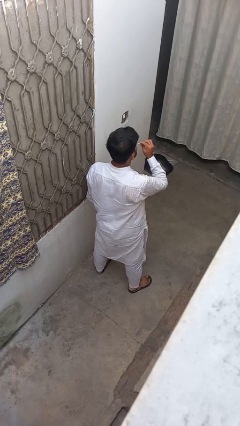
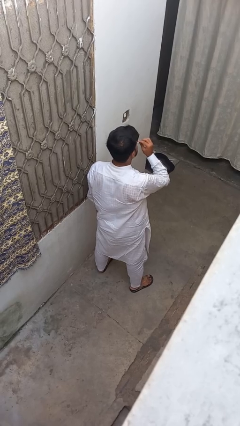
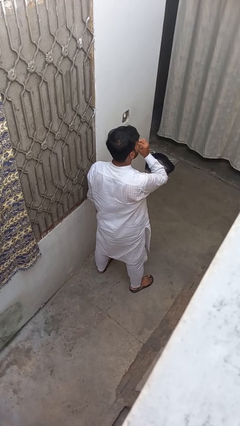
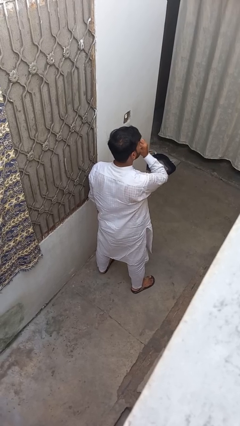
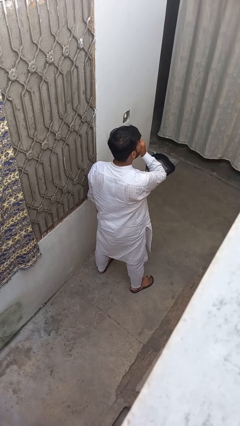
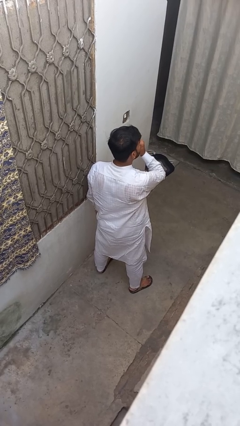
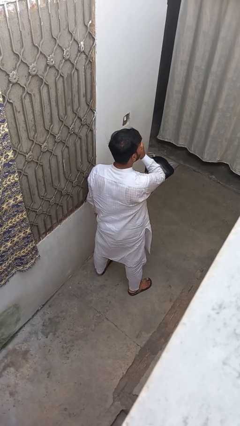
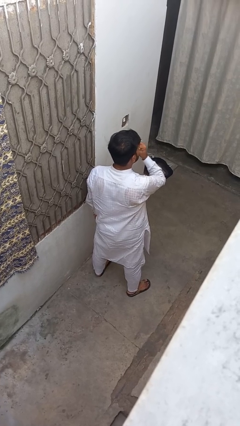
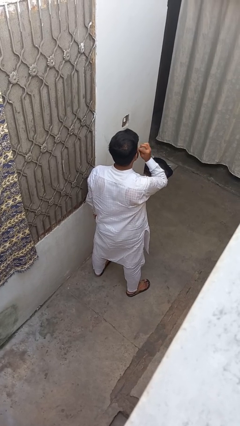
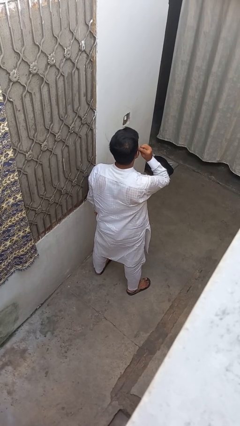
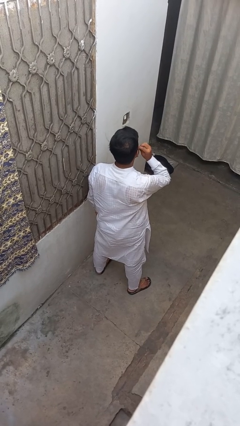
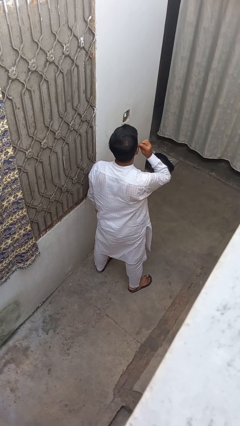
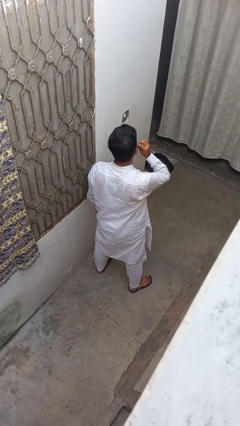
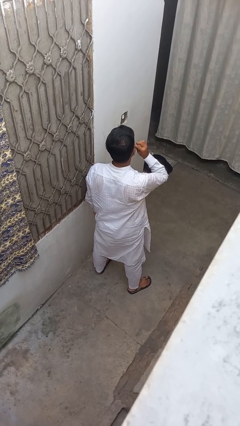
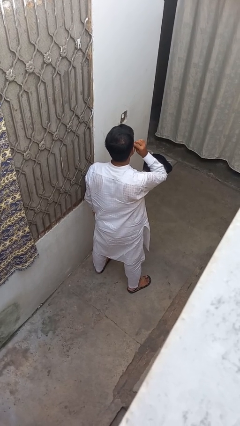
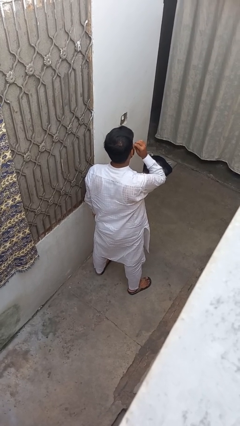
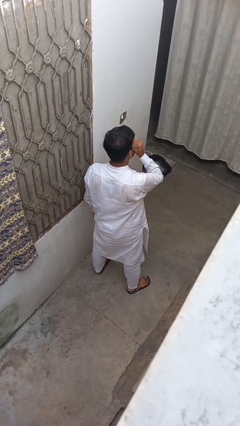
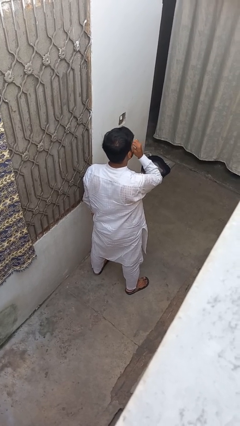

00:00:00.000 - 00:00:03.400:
person flosses

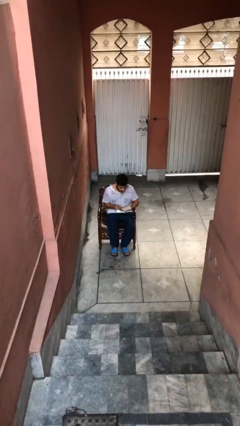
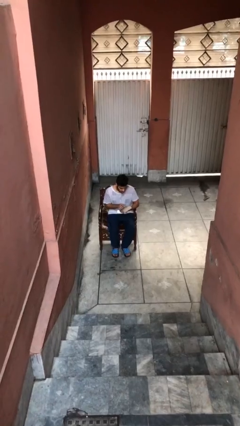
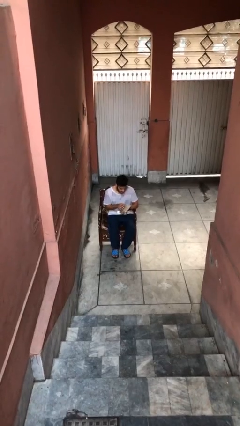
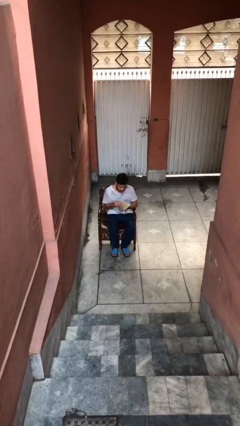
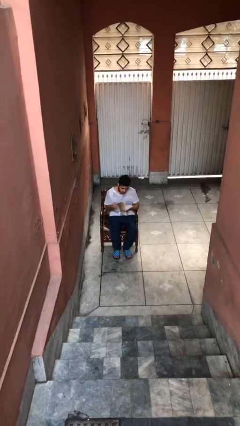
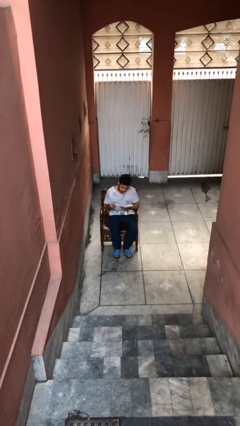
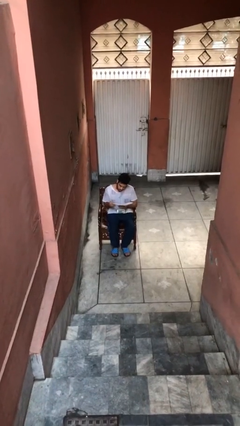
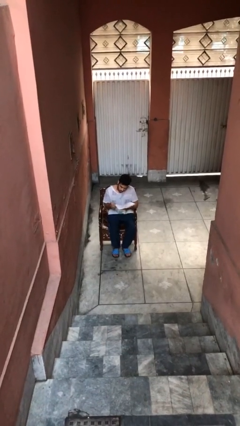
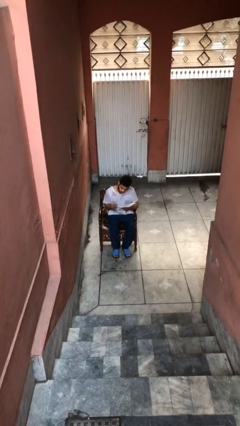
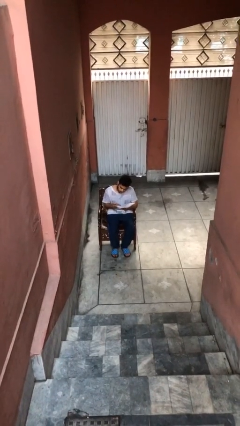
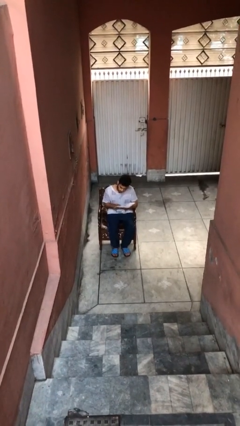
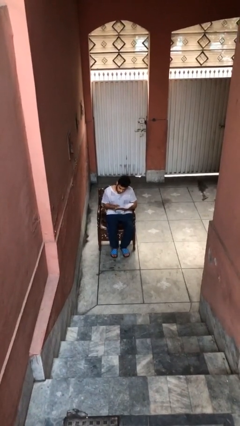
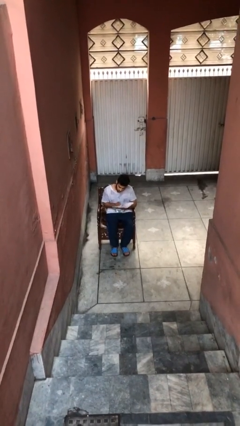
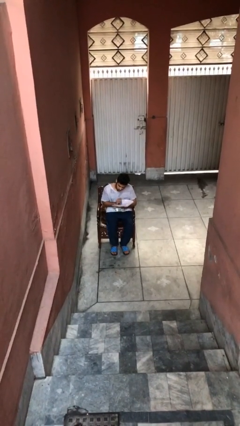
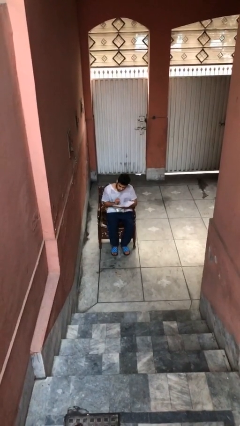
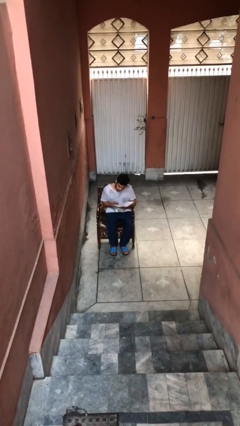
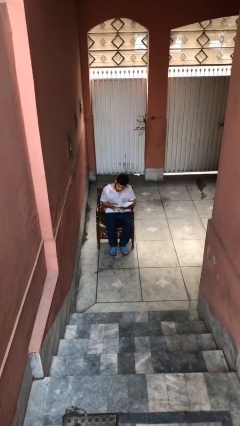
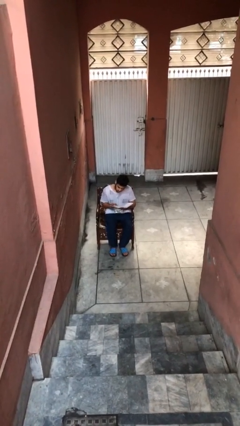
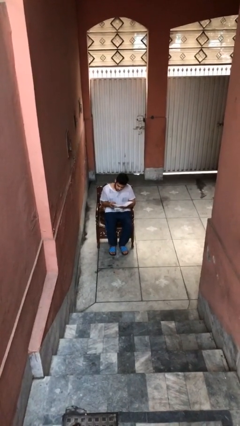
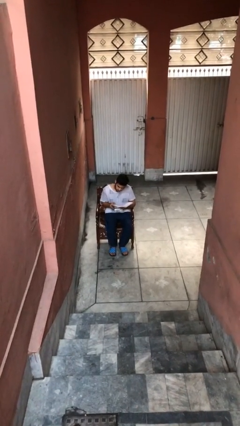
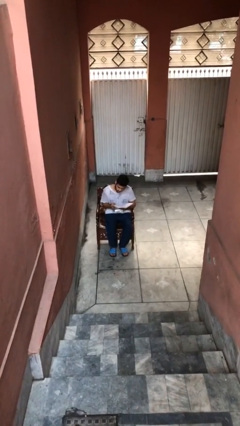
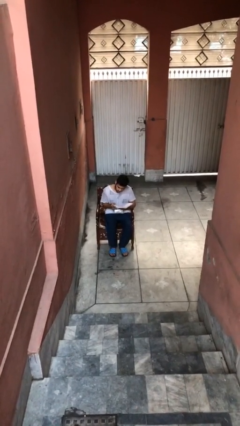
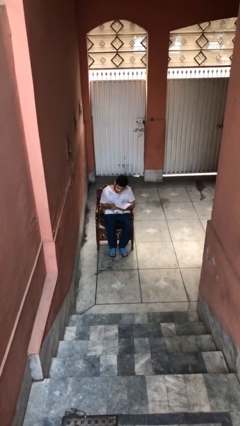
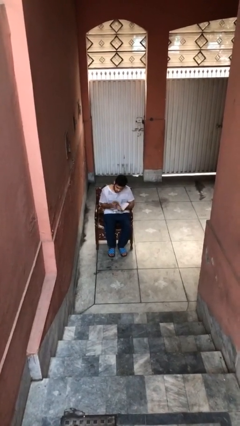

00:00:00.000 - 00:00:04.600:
person reads document

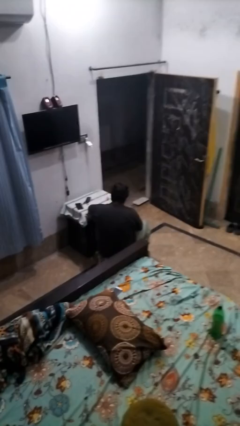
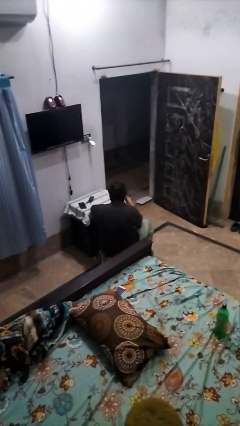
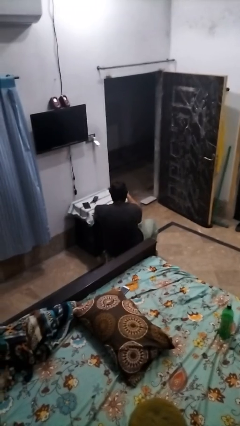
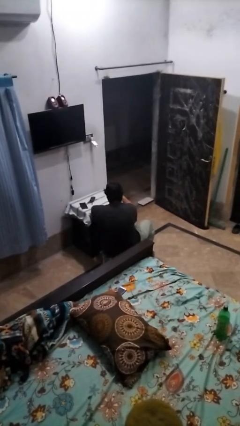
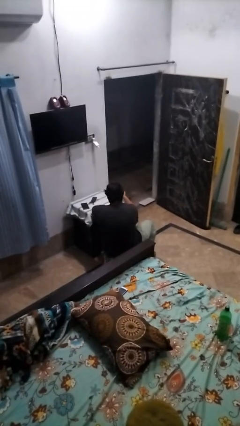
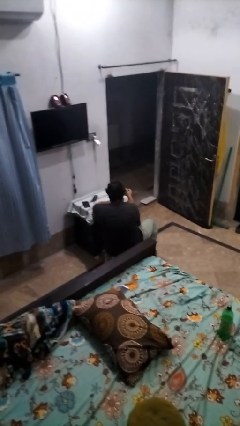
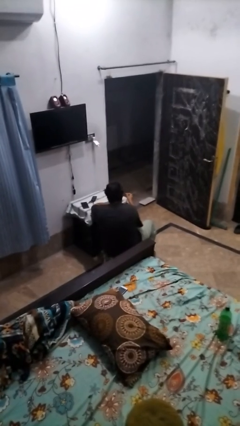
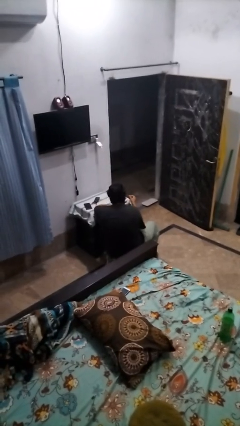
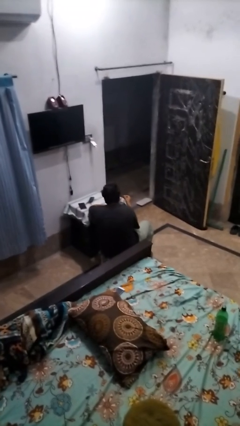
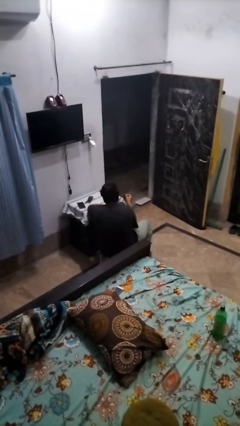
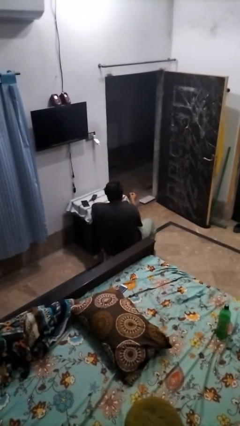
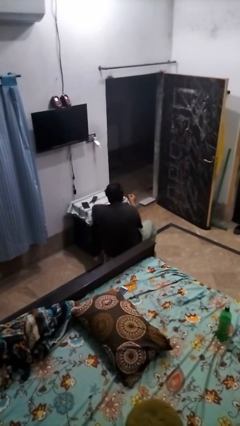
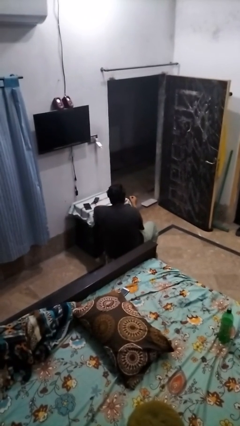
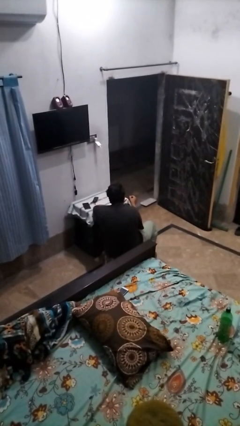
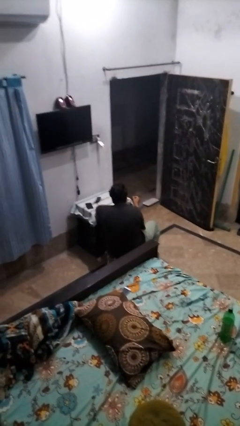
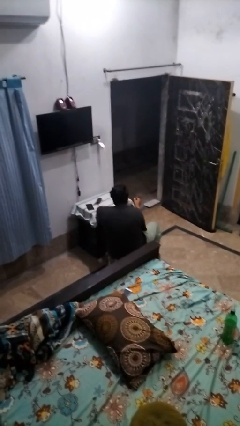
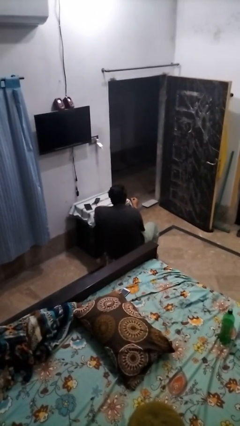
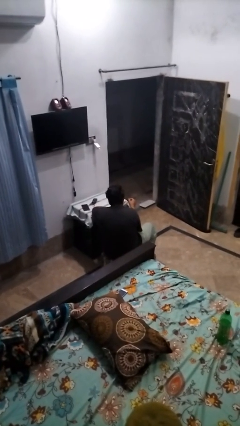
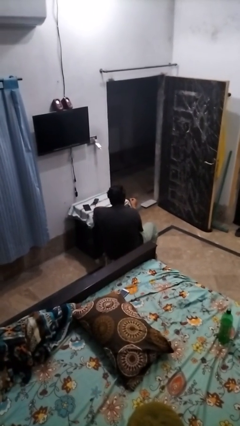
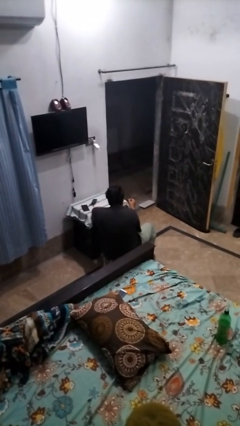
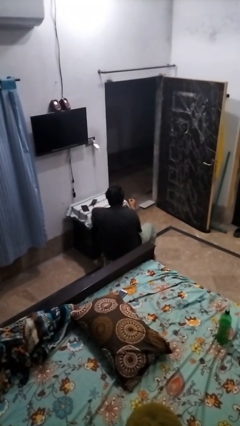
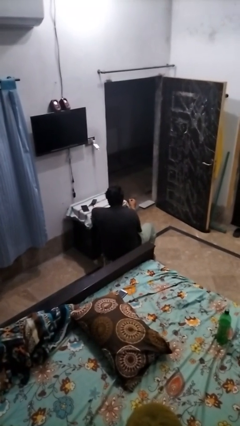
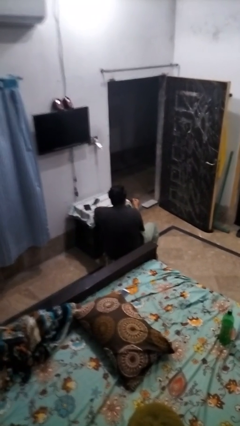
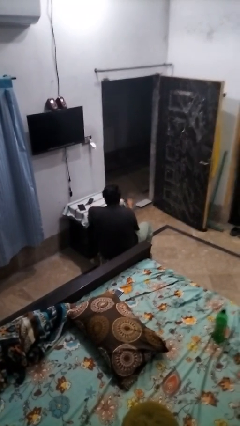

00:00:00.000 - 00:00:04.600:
person paints fingernails

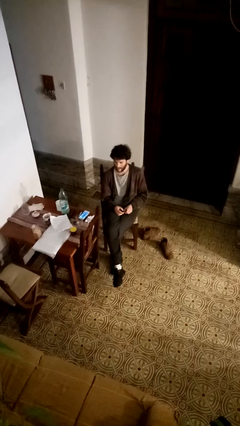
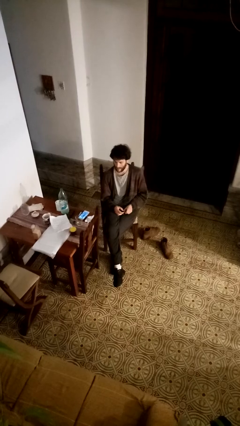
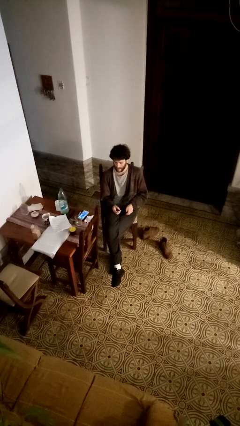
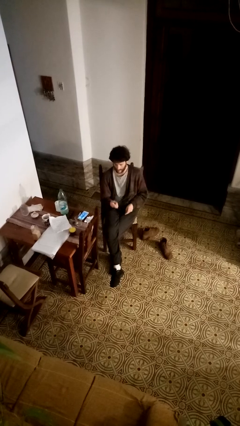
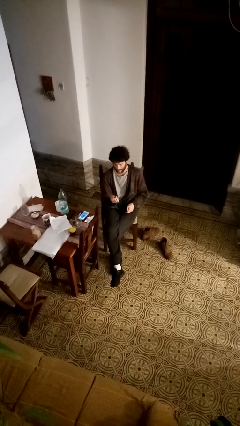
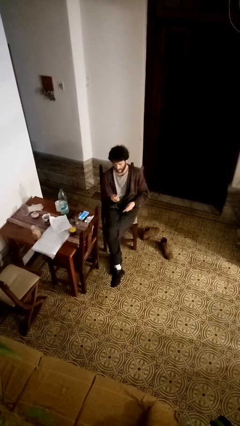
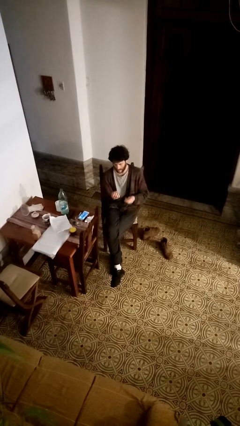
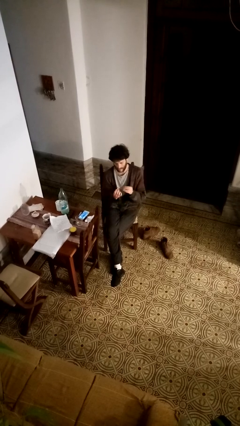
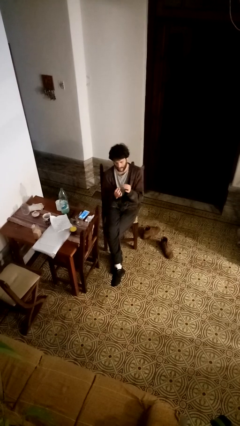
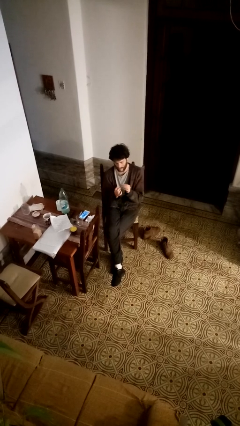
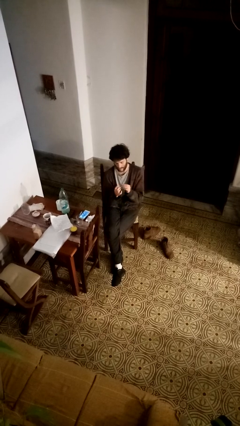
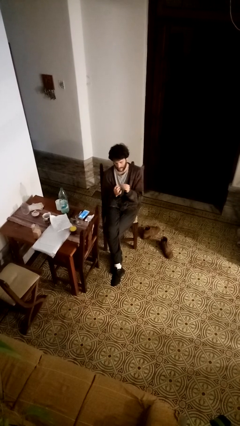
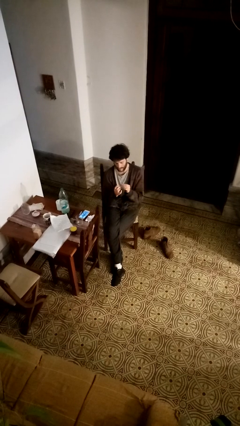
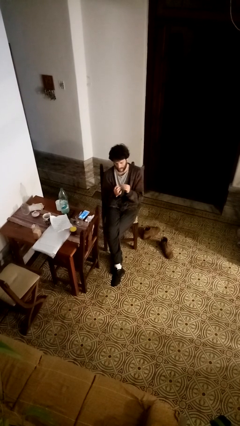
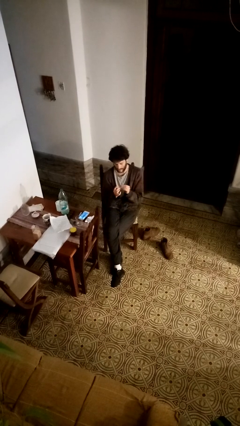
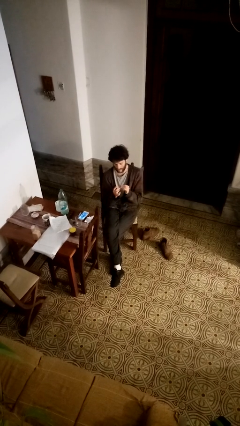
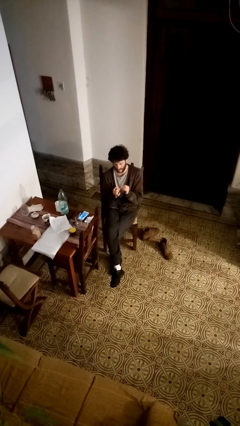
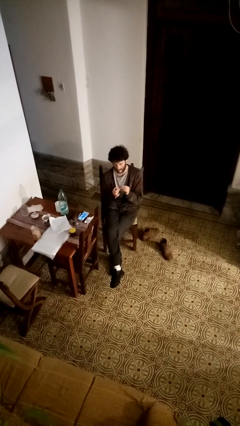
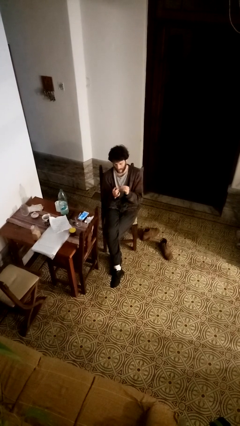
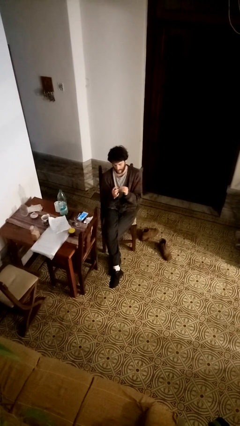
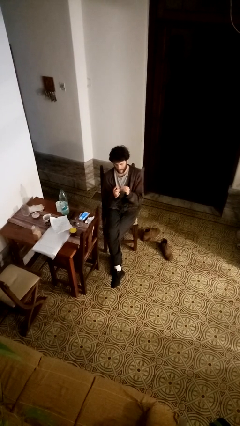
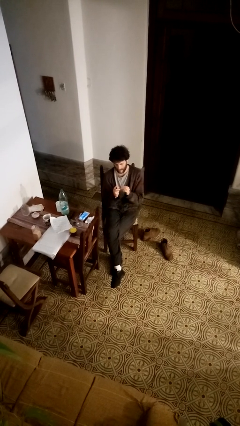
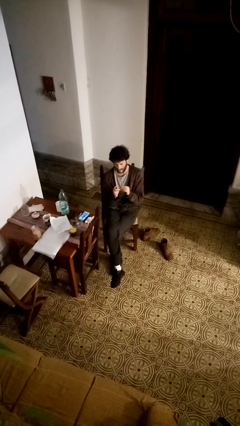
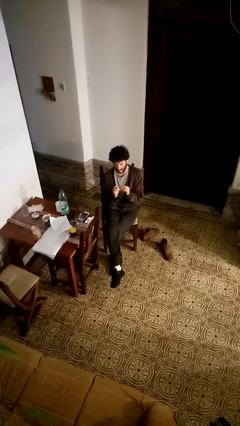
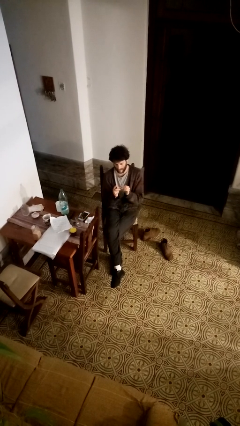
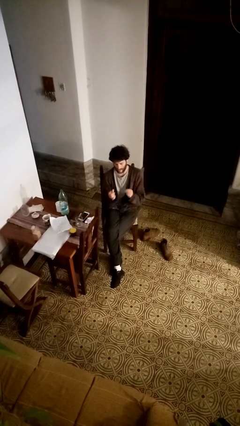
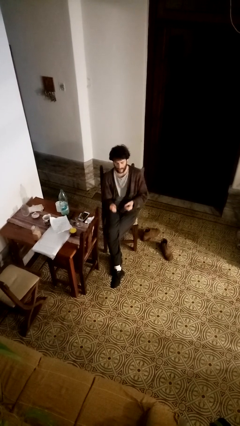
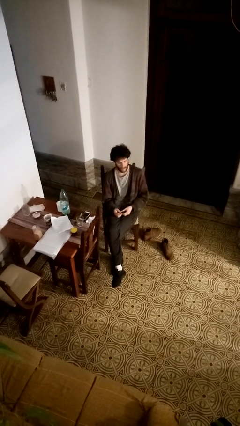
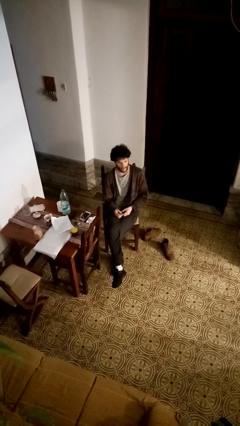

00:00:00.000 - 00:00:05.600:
person clips fingernails
